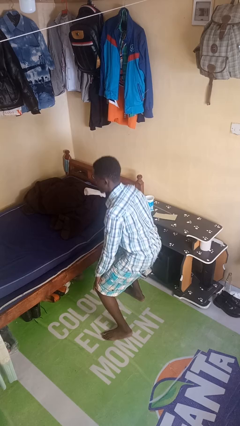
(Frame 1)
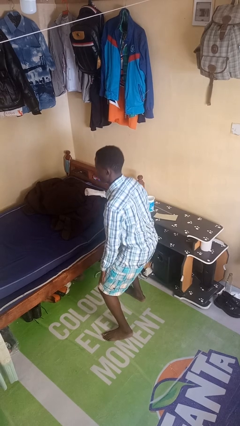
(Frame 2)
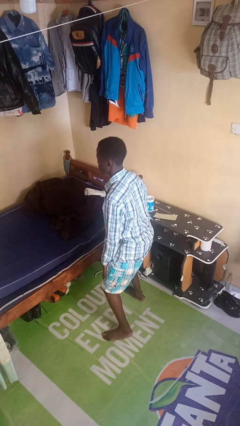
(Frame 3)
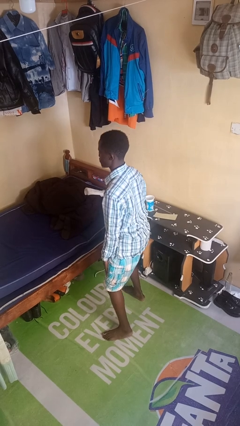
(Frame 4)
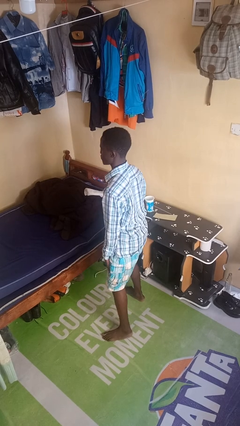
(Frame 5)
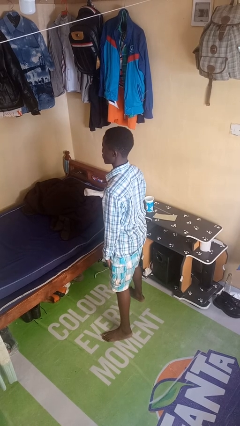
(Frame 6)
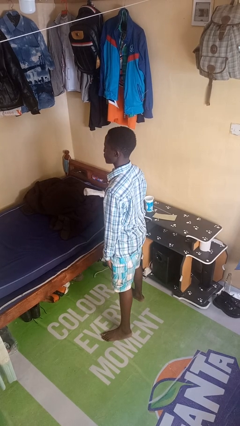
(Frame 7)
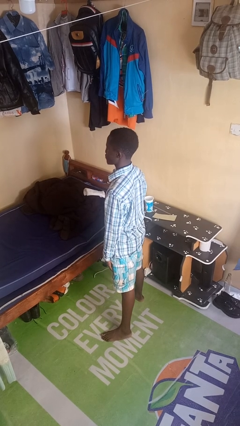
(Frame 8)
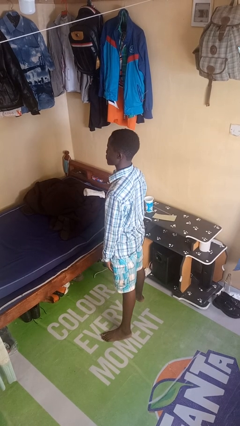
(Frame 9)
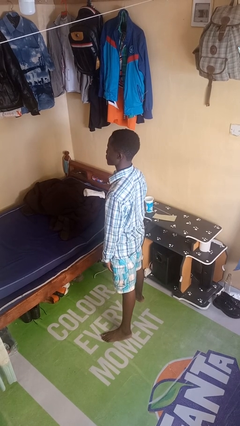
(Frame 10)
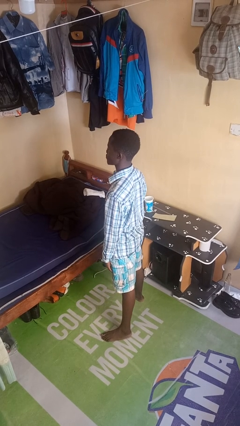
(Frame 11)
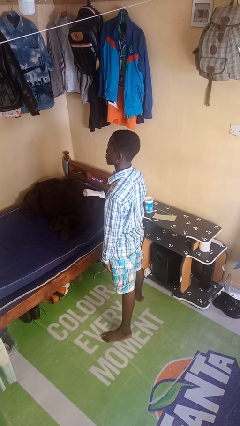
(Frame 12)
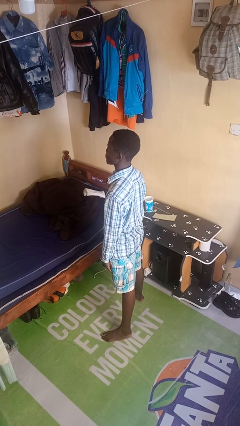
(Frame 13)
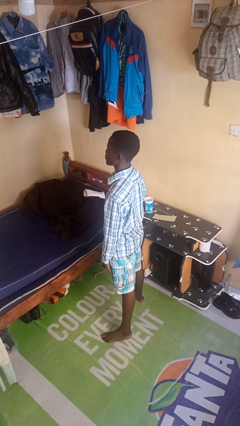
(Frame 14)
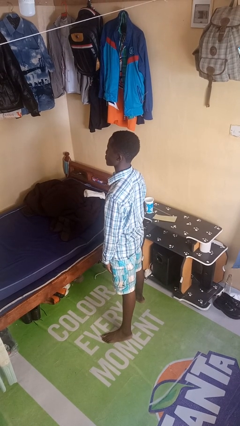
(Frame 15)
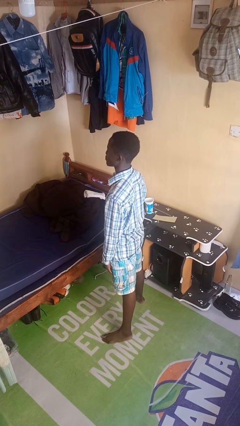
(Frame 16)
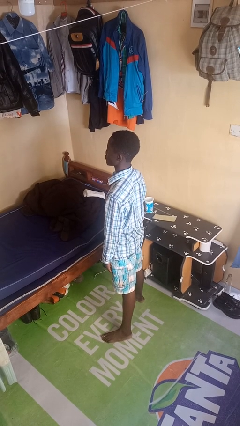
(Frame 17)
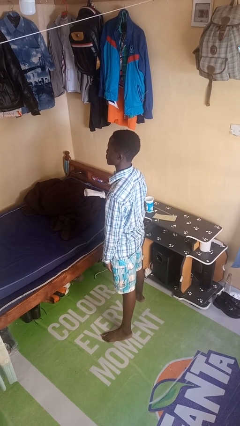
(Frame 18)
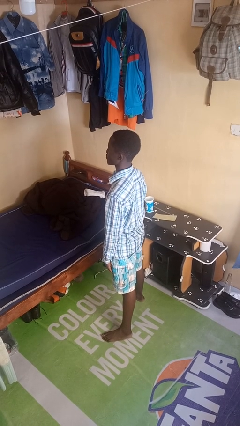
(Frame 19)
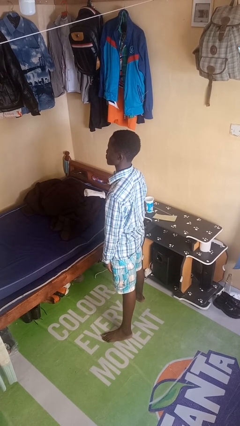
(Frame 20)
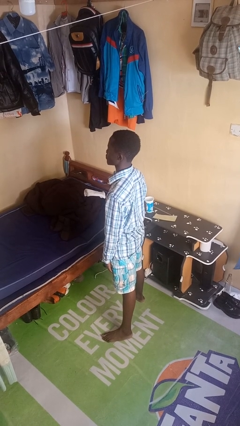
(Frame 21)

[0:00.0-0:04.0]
person stands up

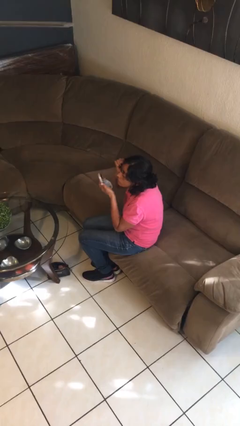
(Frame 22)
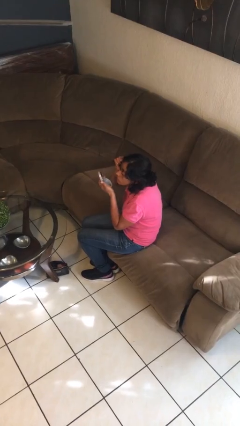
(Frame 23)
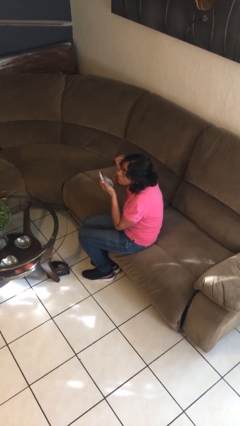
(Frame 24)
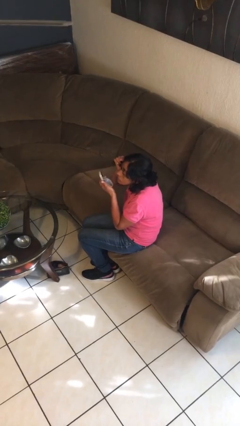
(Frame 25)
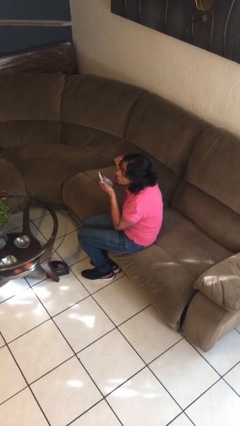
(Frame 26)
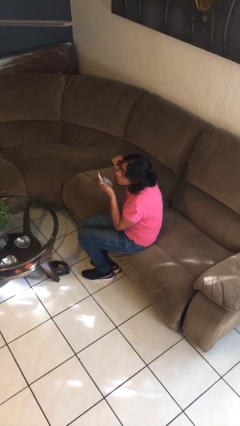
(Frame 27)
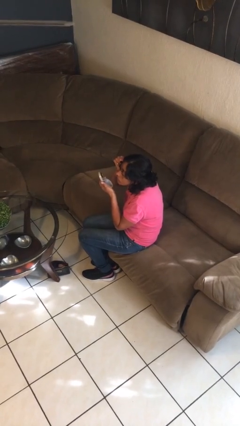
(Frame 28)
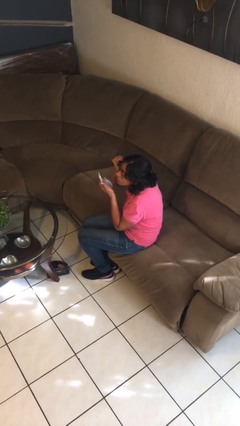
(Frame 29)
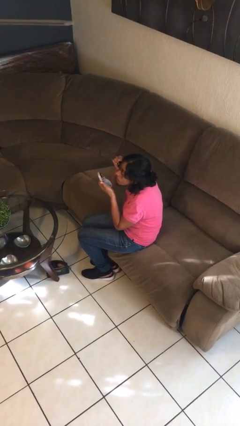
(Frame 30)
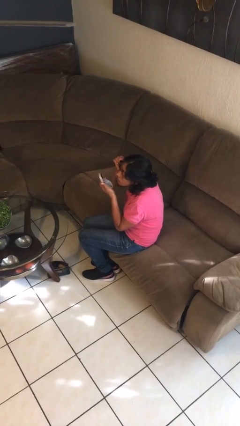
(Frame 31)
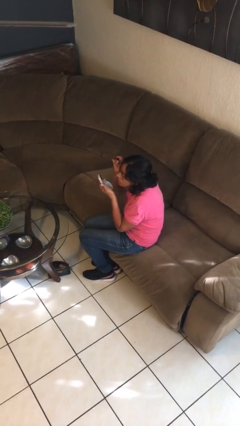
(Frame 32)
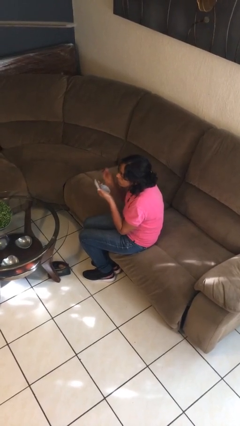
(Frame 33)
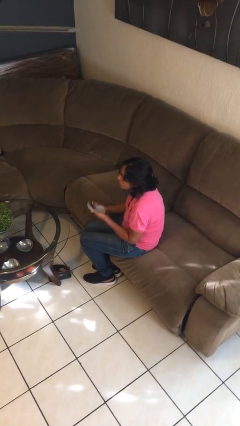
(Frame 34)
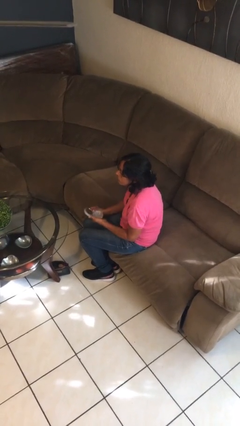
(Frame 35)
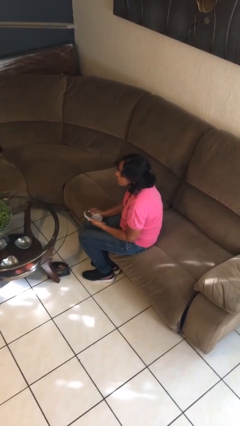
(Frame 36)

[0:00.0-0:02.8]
person applies eye makeup

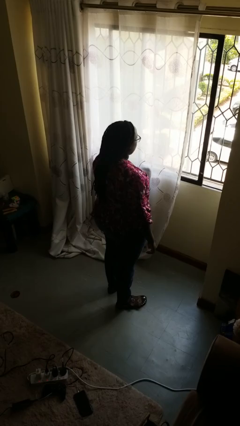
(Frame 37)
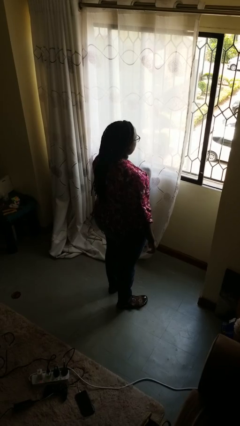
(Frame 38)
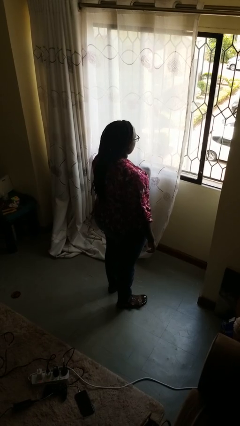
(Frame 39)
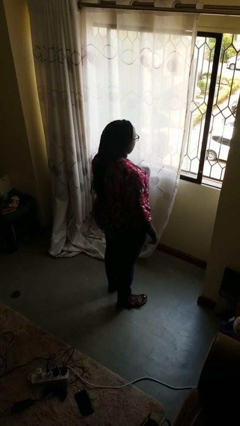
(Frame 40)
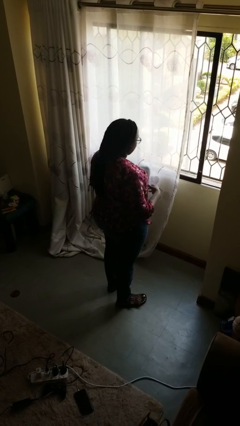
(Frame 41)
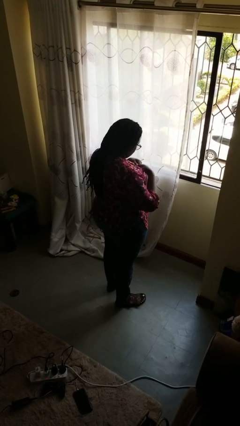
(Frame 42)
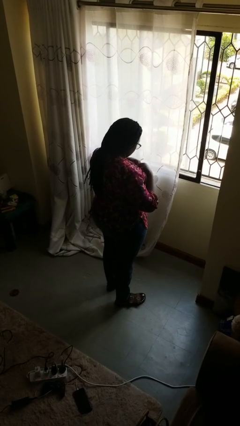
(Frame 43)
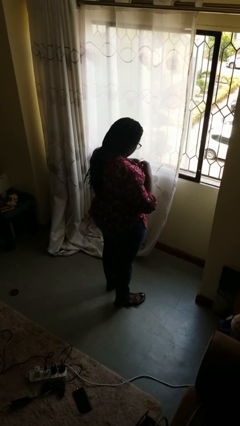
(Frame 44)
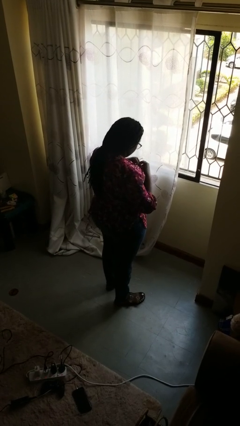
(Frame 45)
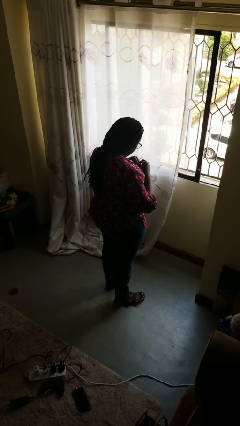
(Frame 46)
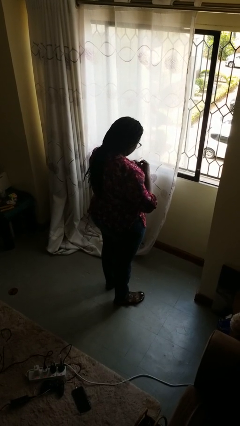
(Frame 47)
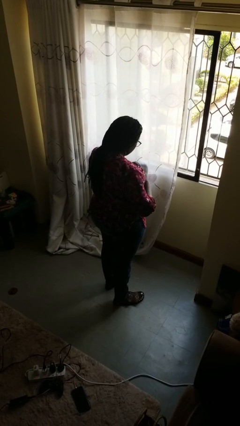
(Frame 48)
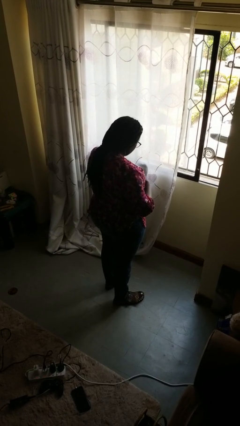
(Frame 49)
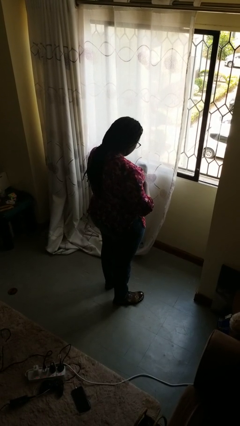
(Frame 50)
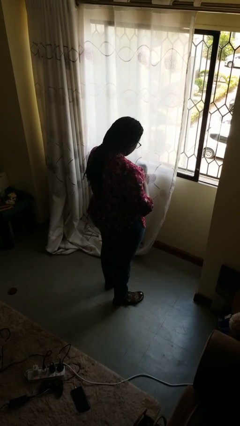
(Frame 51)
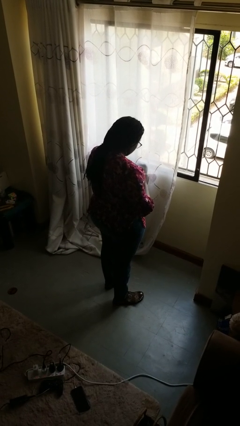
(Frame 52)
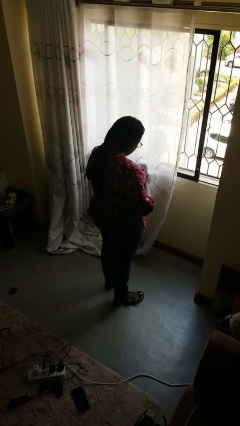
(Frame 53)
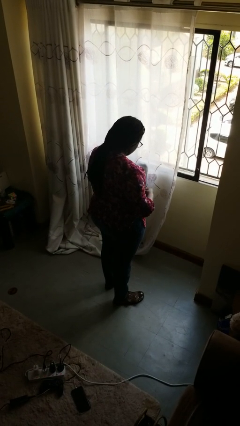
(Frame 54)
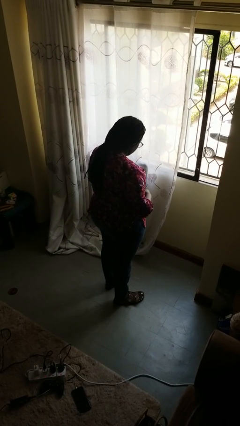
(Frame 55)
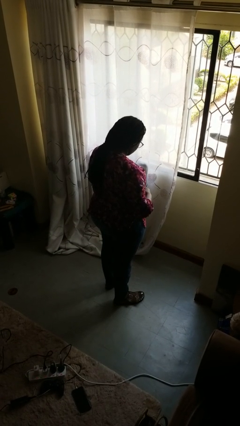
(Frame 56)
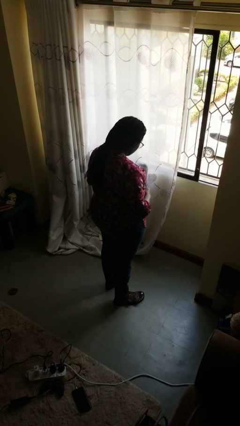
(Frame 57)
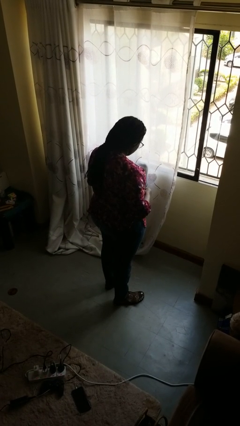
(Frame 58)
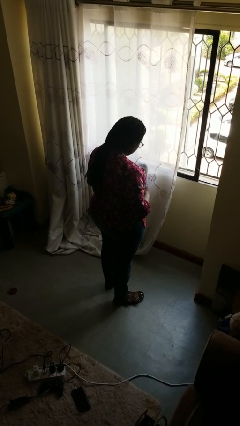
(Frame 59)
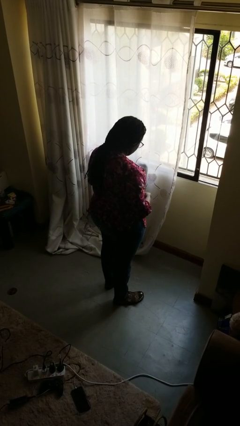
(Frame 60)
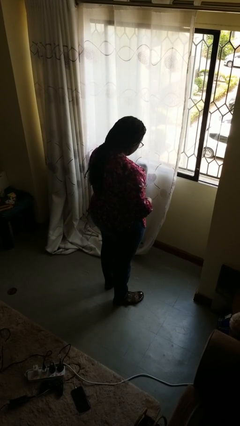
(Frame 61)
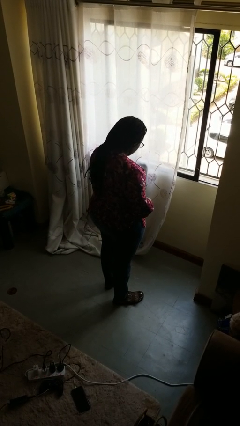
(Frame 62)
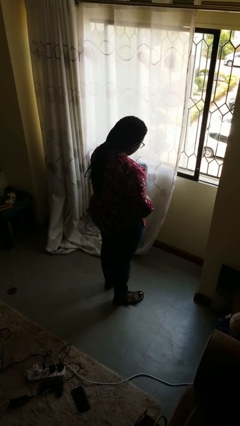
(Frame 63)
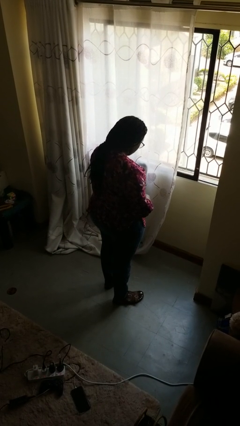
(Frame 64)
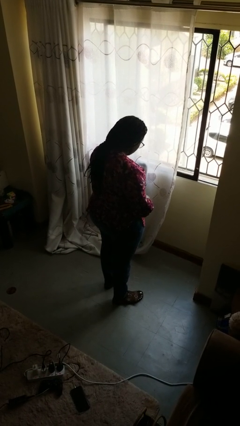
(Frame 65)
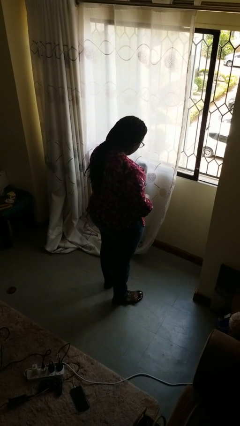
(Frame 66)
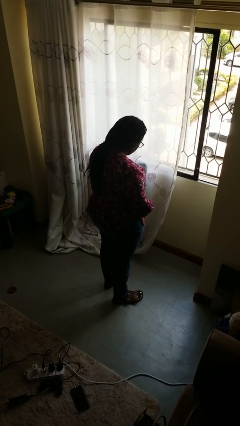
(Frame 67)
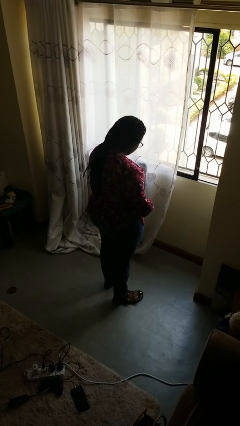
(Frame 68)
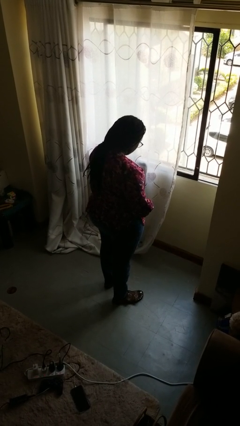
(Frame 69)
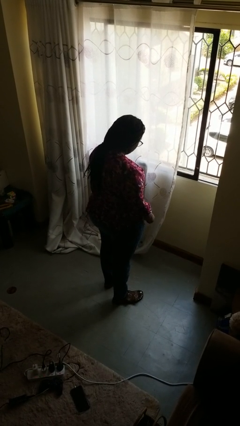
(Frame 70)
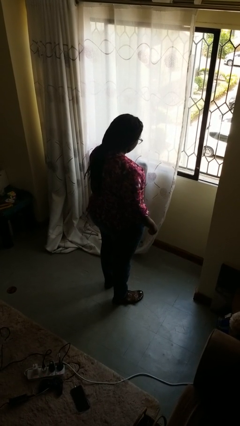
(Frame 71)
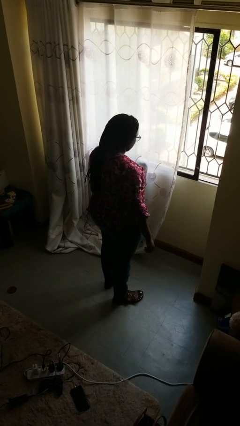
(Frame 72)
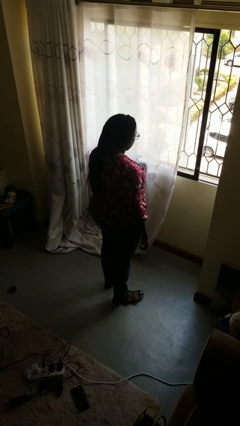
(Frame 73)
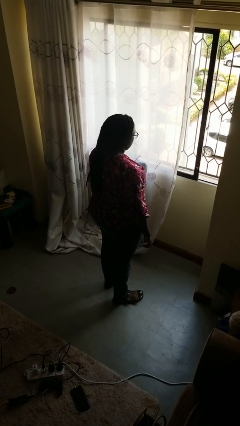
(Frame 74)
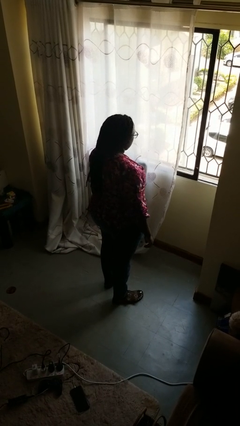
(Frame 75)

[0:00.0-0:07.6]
person unbuttons shirt

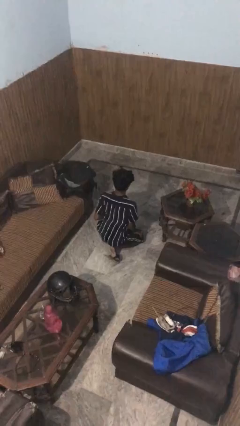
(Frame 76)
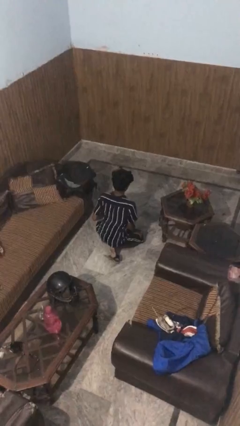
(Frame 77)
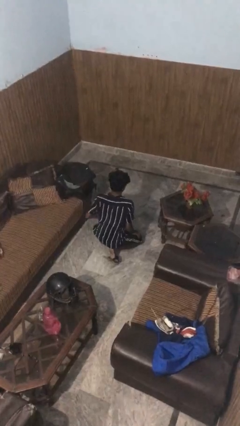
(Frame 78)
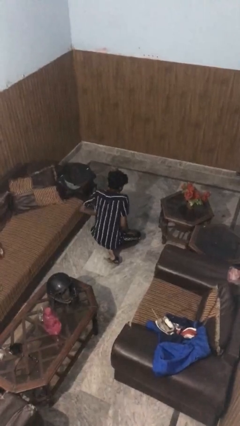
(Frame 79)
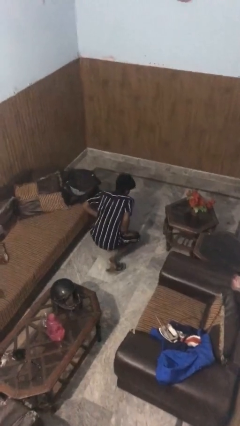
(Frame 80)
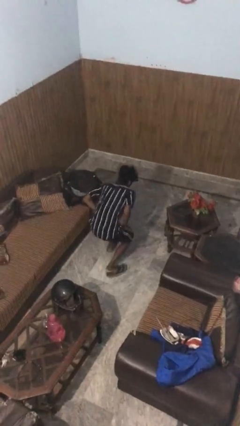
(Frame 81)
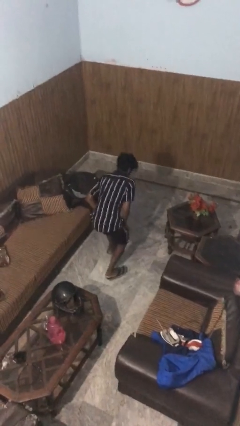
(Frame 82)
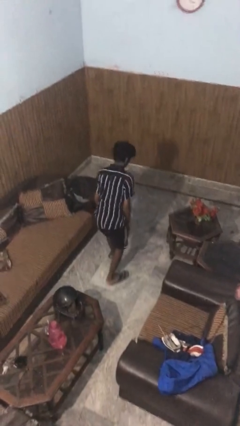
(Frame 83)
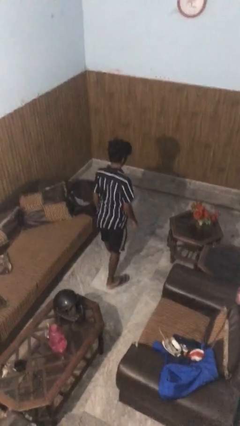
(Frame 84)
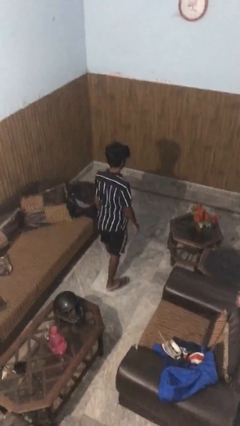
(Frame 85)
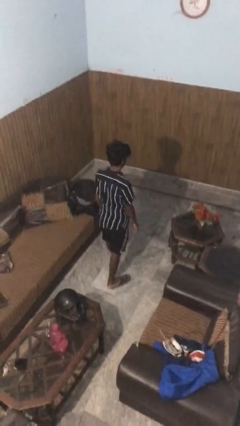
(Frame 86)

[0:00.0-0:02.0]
person stands up from floor

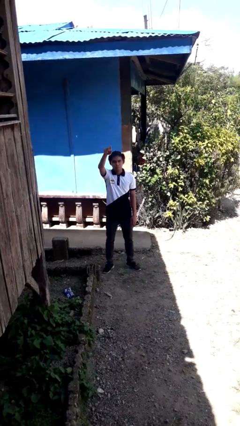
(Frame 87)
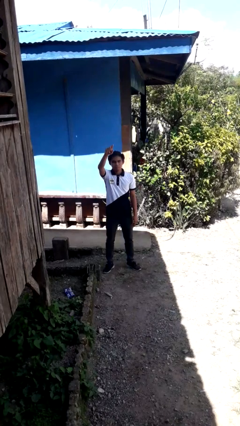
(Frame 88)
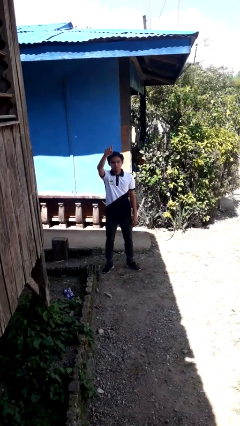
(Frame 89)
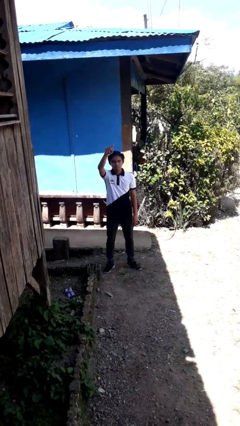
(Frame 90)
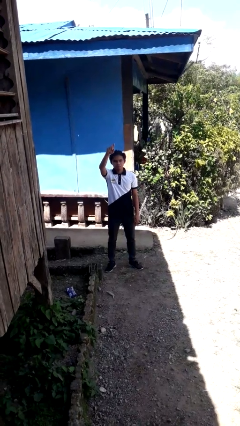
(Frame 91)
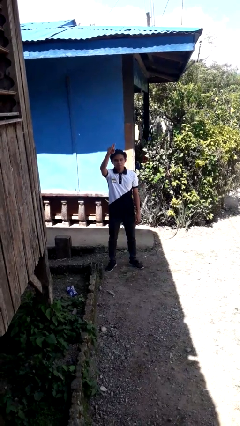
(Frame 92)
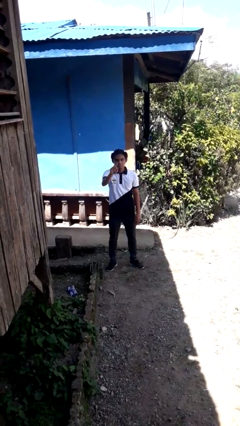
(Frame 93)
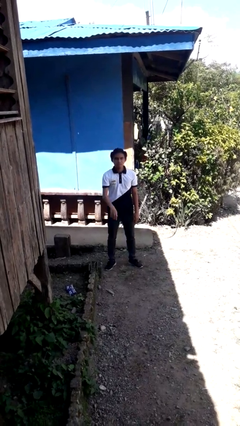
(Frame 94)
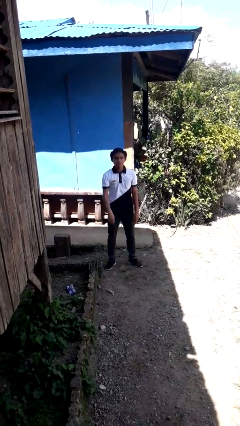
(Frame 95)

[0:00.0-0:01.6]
person gestures swipe up
